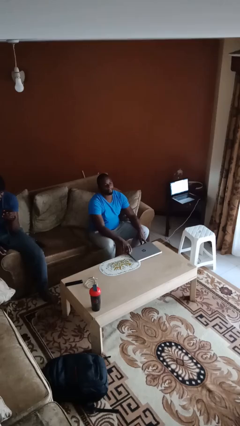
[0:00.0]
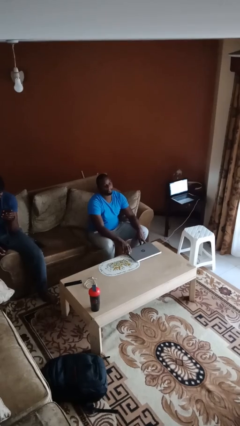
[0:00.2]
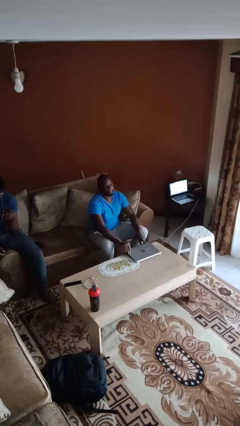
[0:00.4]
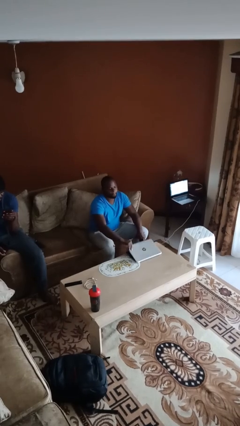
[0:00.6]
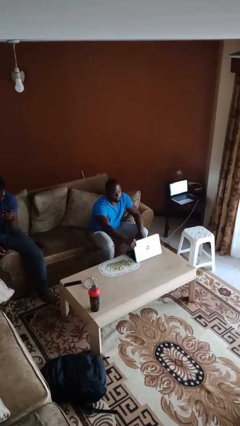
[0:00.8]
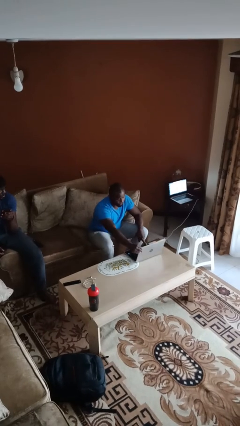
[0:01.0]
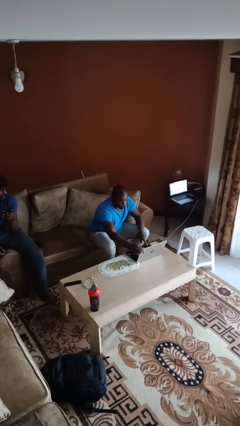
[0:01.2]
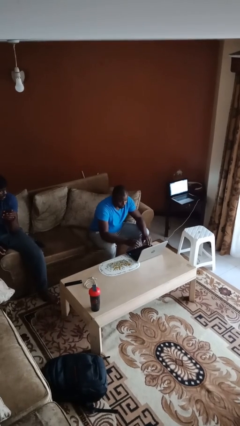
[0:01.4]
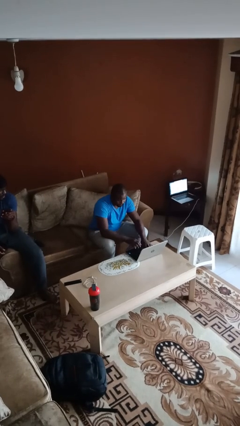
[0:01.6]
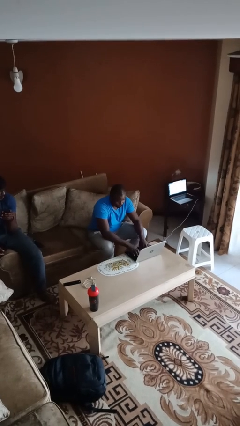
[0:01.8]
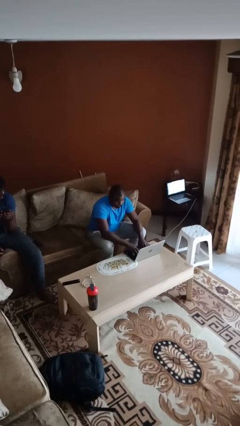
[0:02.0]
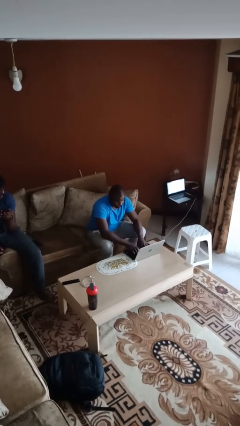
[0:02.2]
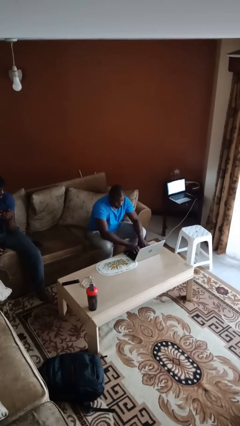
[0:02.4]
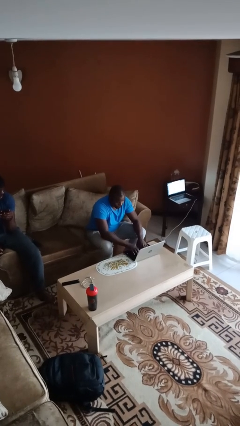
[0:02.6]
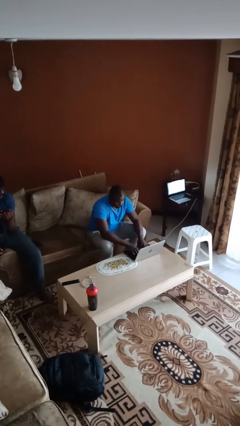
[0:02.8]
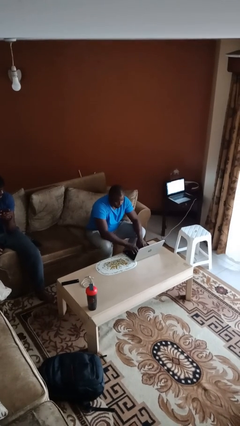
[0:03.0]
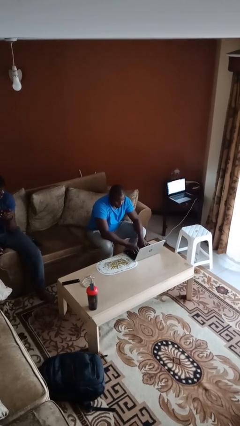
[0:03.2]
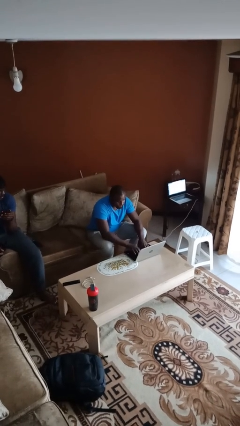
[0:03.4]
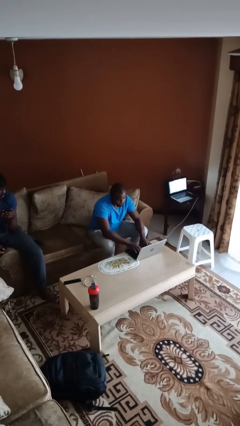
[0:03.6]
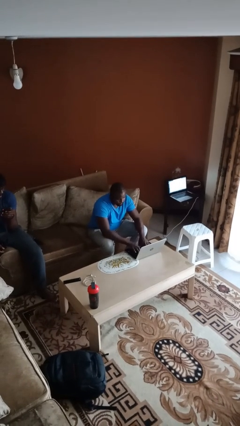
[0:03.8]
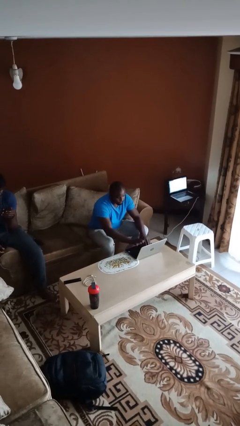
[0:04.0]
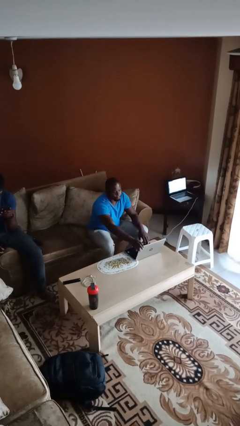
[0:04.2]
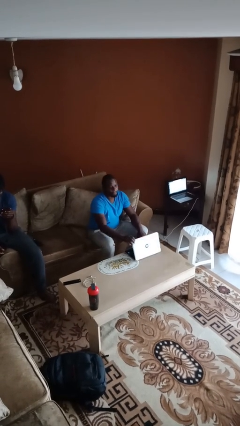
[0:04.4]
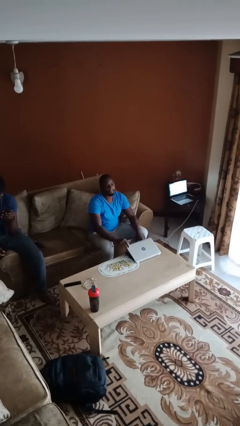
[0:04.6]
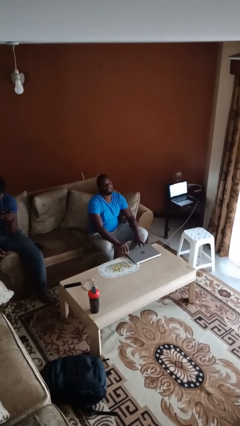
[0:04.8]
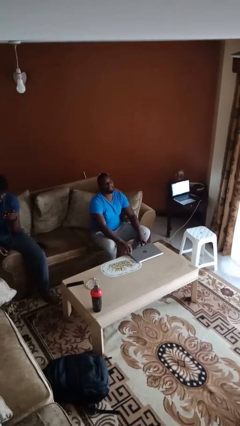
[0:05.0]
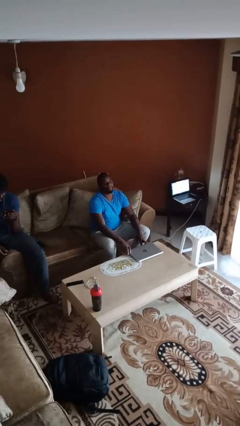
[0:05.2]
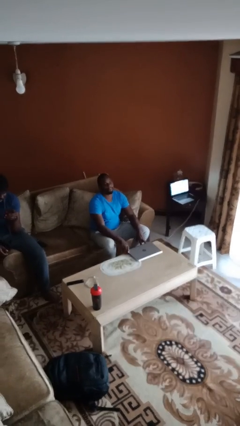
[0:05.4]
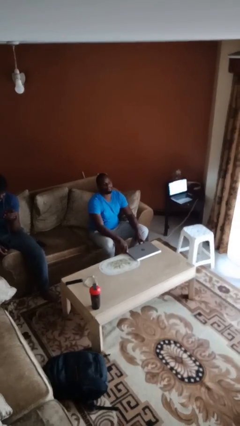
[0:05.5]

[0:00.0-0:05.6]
person interacts with laptop

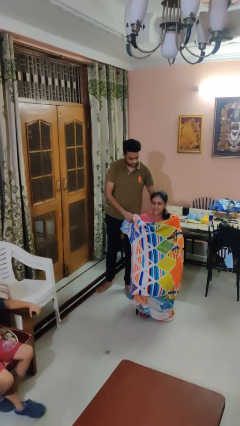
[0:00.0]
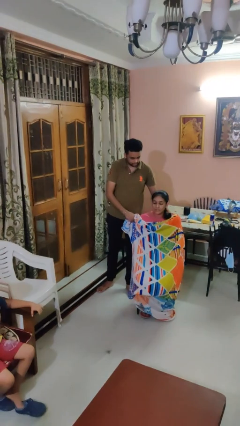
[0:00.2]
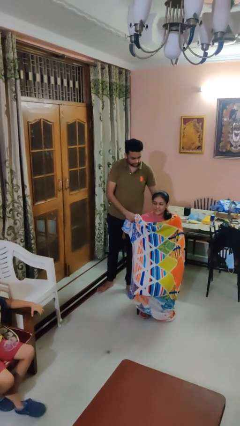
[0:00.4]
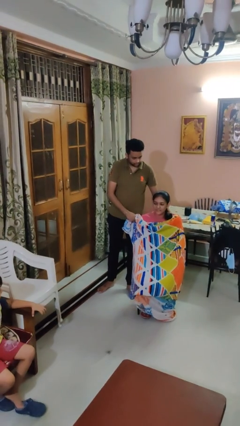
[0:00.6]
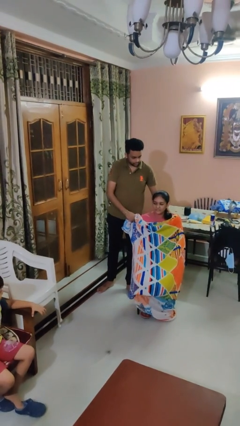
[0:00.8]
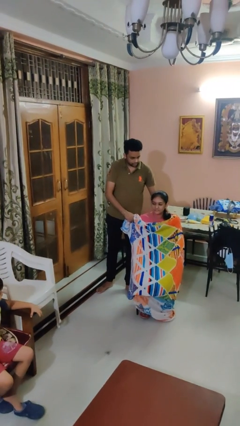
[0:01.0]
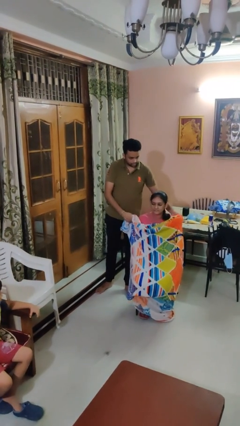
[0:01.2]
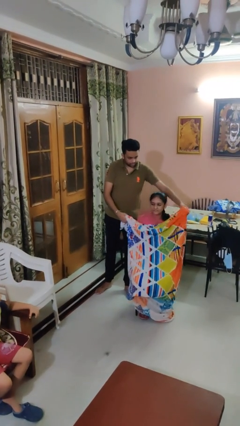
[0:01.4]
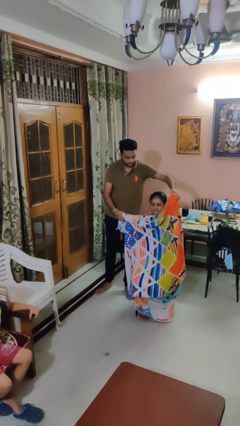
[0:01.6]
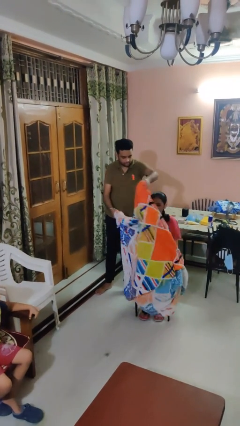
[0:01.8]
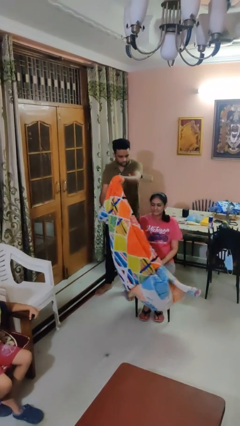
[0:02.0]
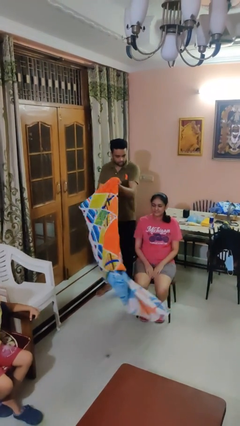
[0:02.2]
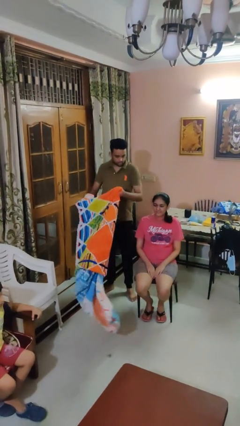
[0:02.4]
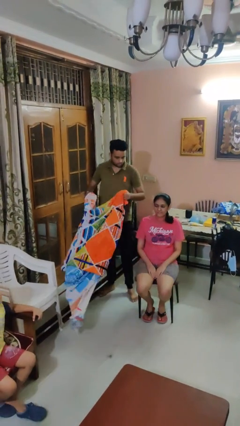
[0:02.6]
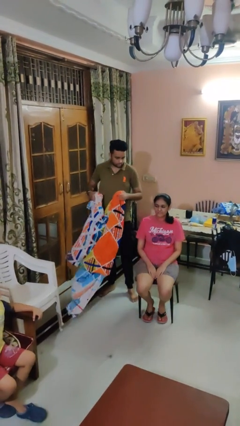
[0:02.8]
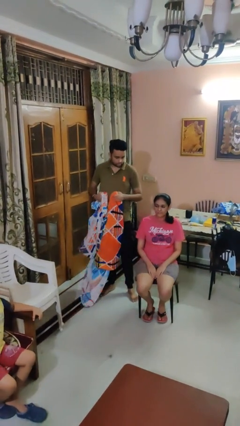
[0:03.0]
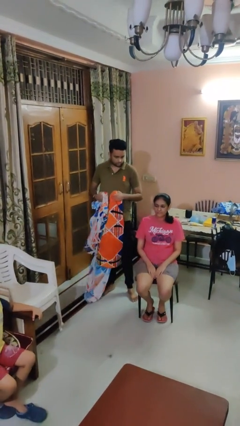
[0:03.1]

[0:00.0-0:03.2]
person uncovers friend with blanket

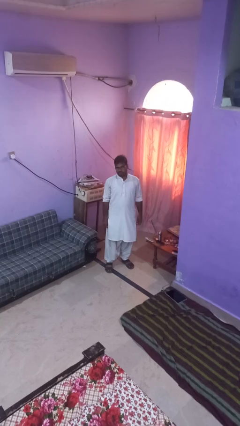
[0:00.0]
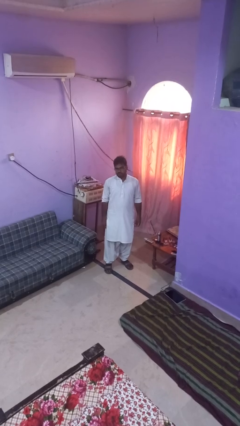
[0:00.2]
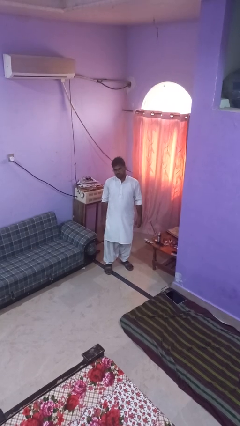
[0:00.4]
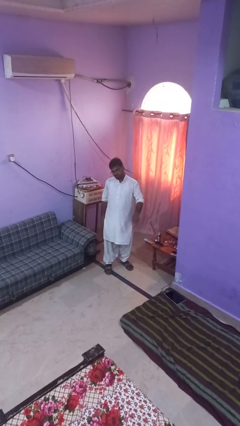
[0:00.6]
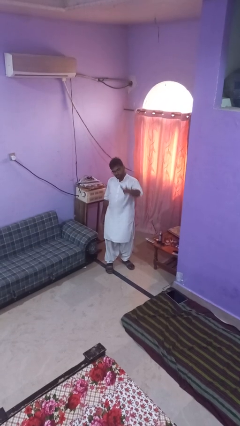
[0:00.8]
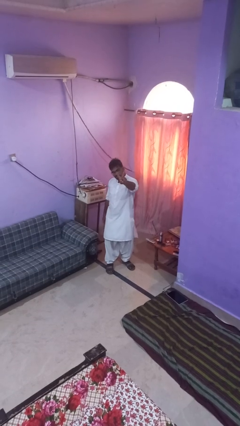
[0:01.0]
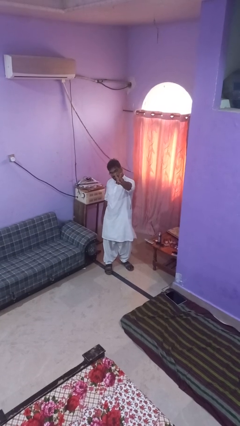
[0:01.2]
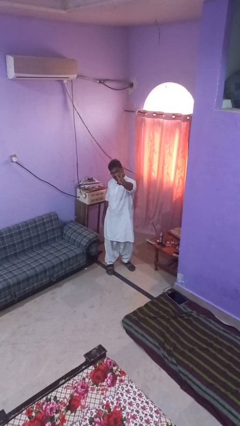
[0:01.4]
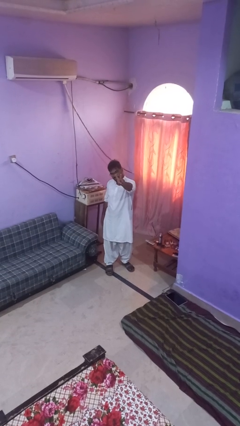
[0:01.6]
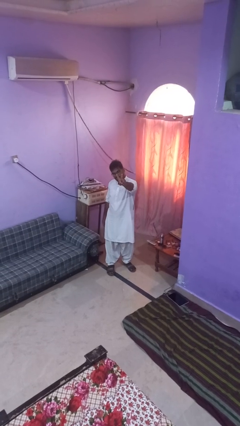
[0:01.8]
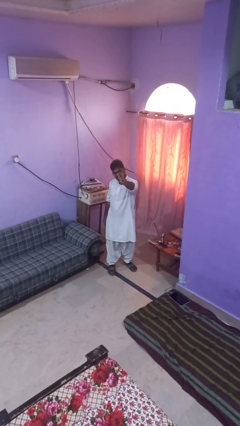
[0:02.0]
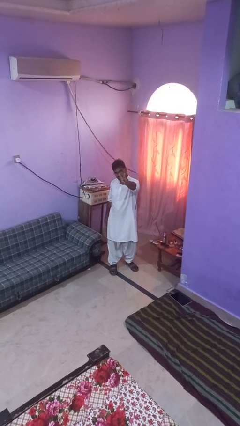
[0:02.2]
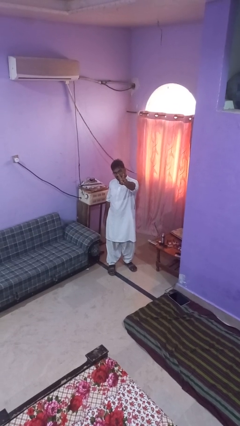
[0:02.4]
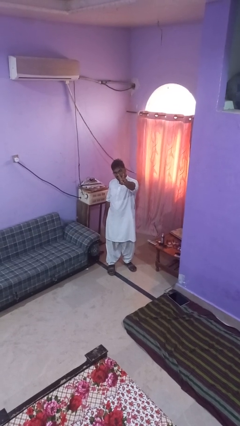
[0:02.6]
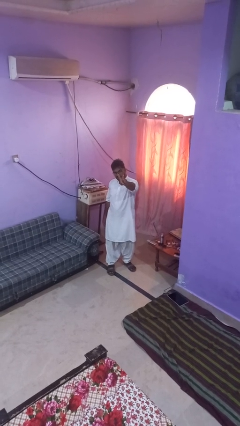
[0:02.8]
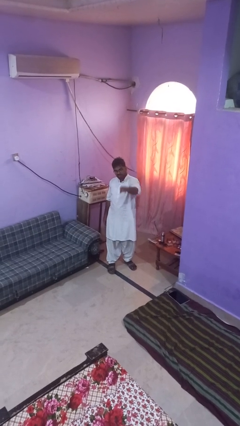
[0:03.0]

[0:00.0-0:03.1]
person gestures peace

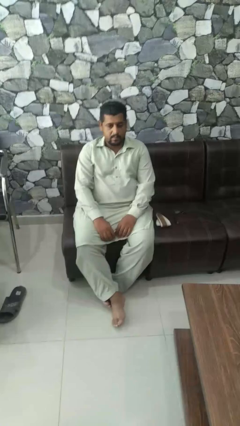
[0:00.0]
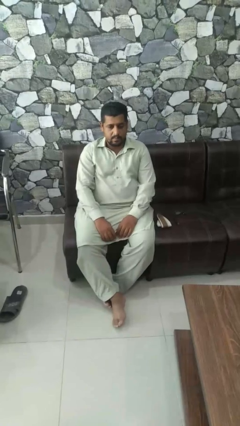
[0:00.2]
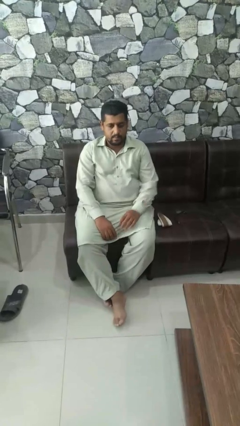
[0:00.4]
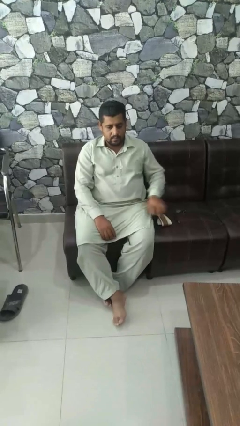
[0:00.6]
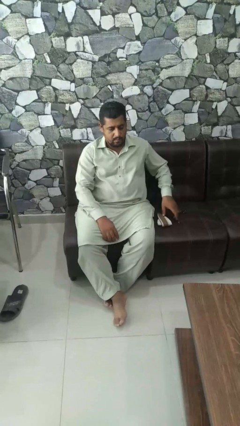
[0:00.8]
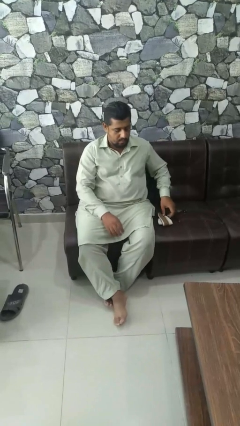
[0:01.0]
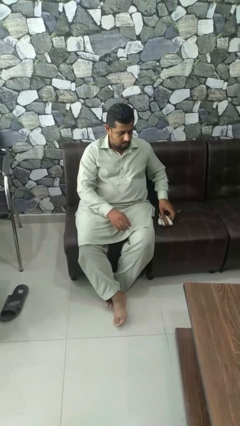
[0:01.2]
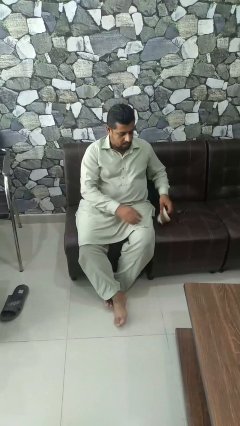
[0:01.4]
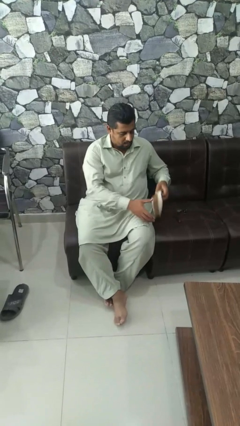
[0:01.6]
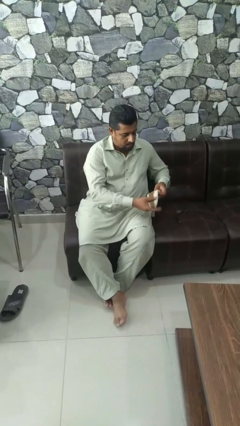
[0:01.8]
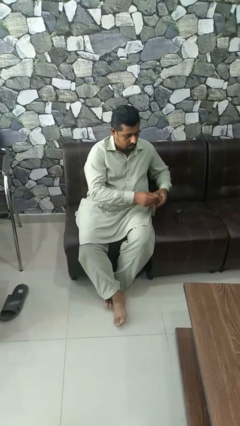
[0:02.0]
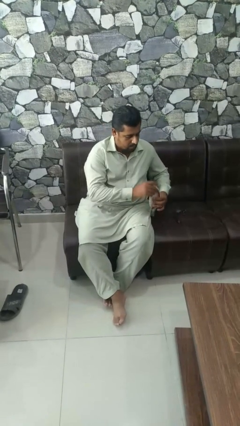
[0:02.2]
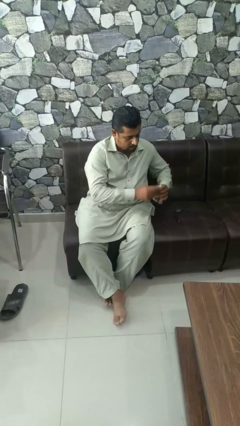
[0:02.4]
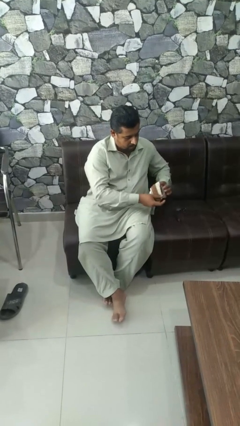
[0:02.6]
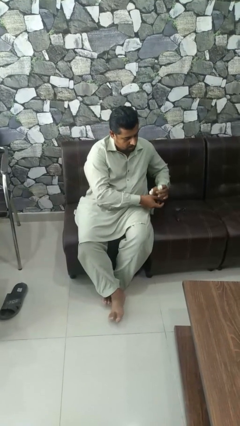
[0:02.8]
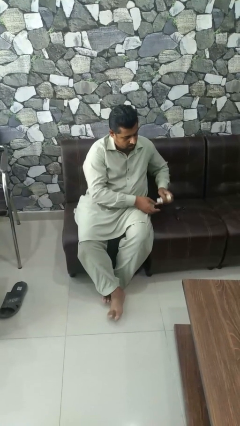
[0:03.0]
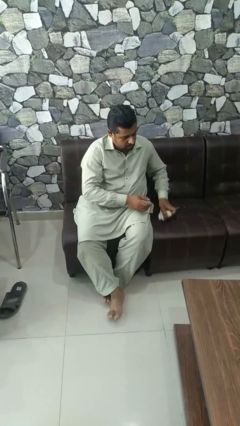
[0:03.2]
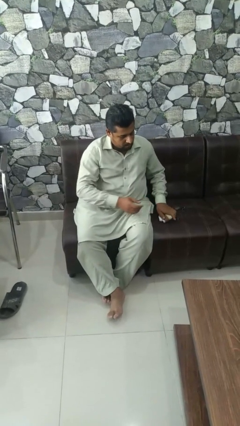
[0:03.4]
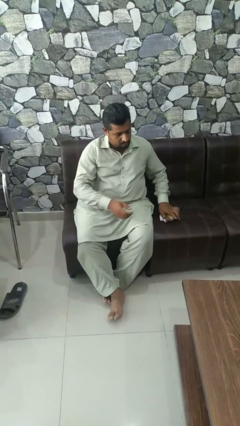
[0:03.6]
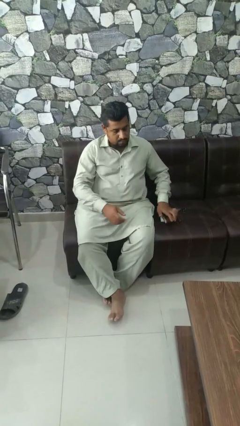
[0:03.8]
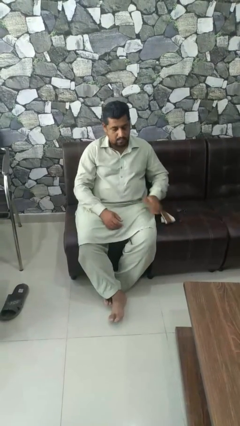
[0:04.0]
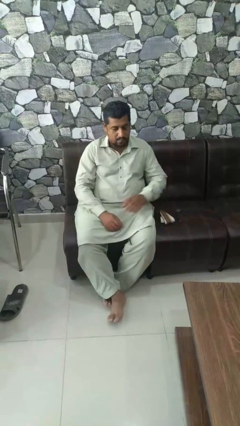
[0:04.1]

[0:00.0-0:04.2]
person folds socks

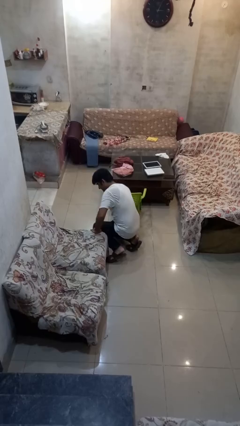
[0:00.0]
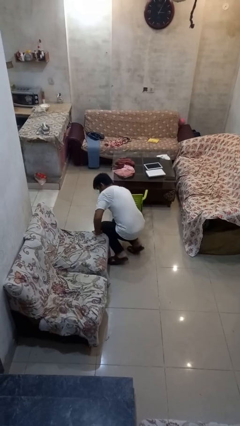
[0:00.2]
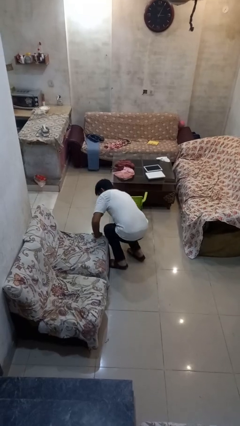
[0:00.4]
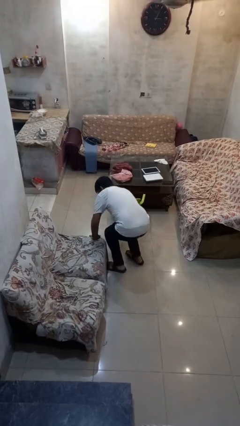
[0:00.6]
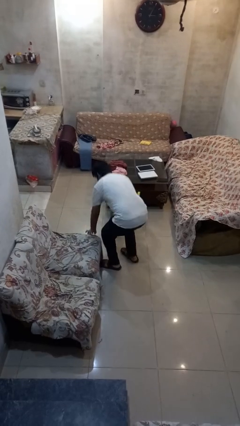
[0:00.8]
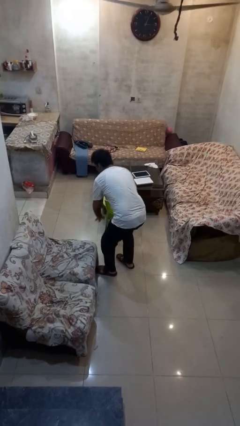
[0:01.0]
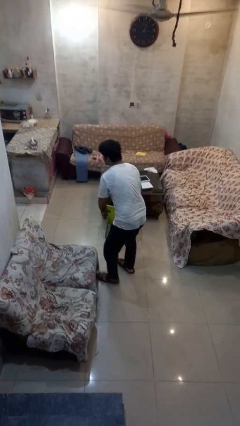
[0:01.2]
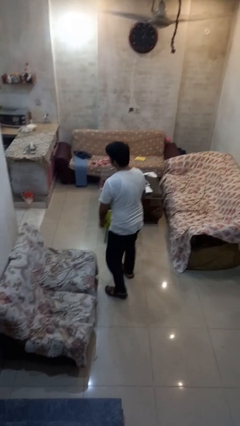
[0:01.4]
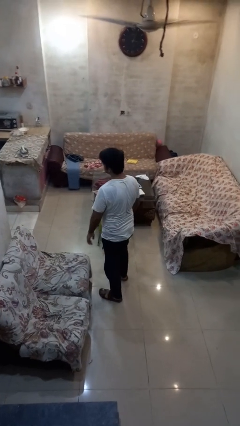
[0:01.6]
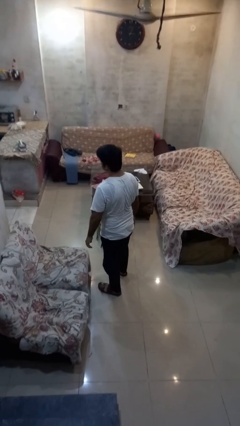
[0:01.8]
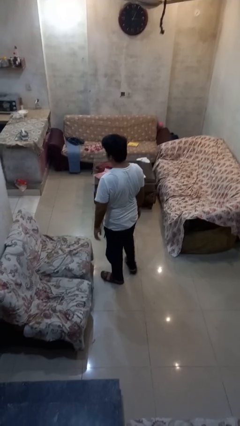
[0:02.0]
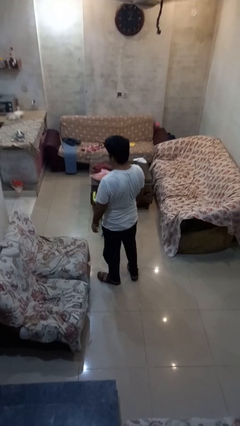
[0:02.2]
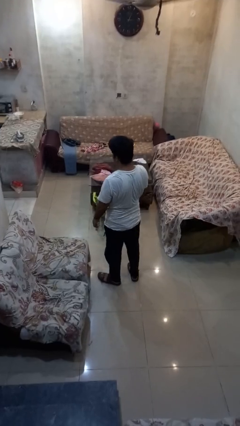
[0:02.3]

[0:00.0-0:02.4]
person stands up from floor
